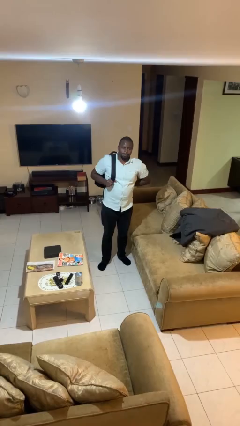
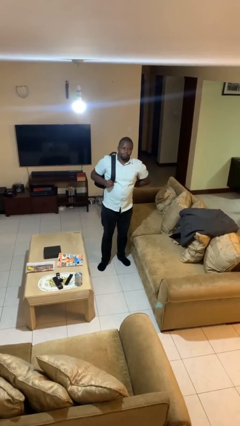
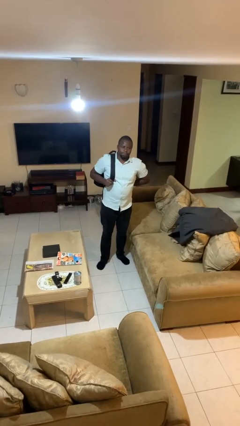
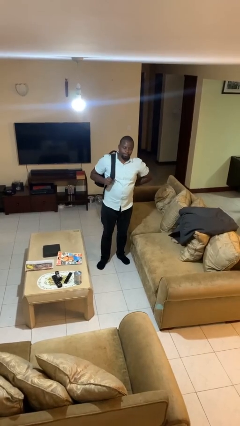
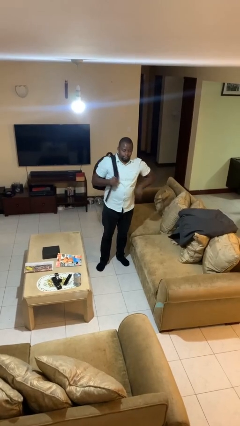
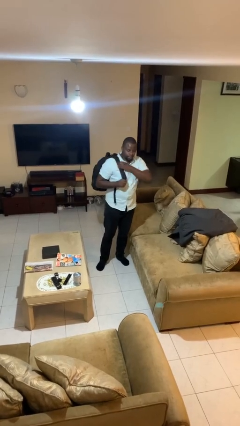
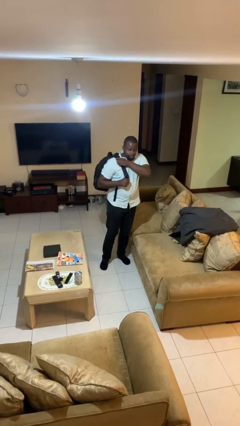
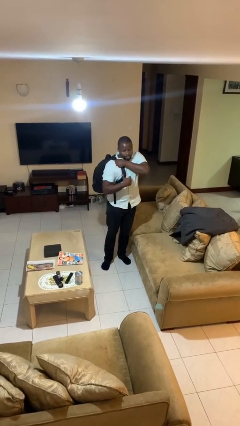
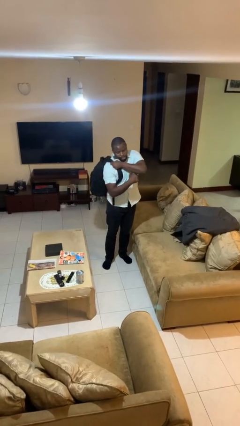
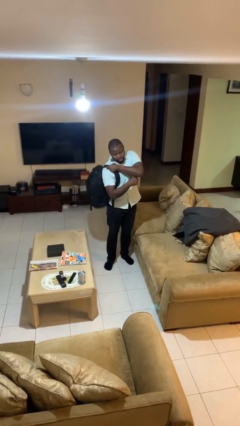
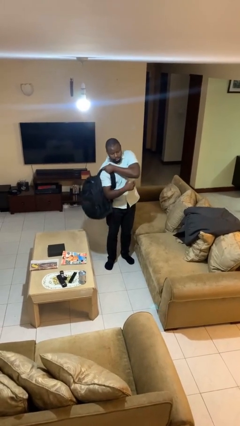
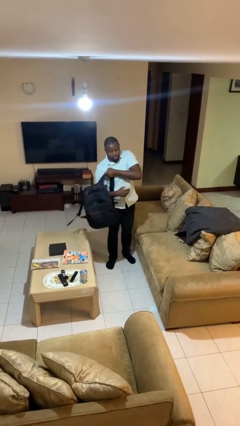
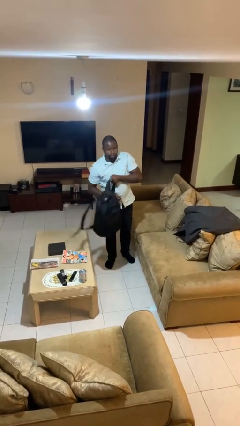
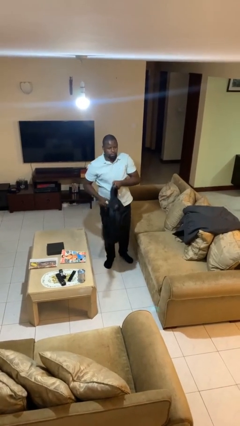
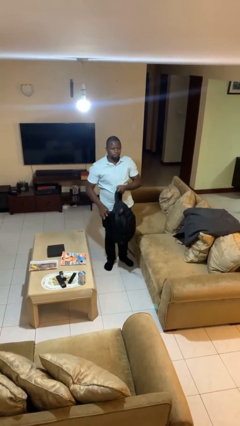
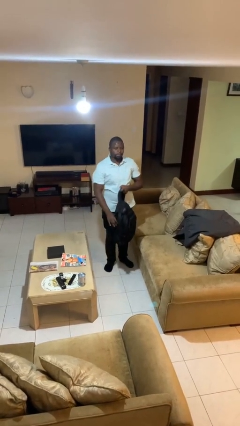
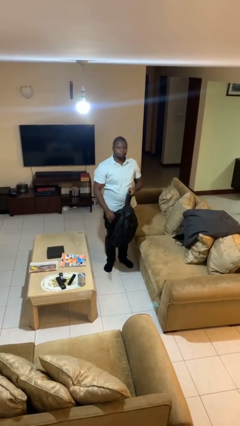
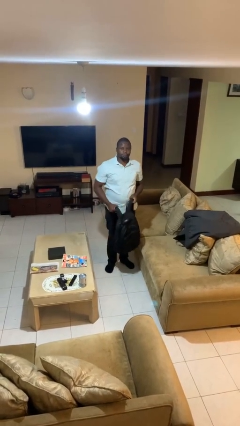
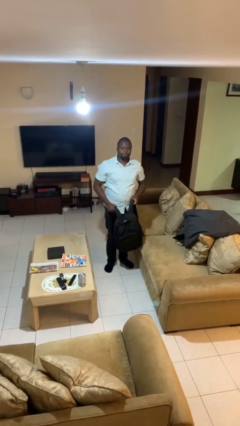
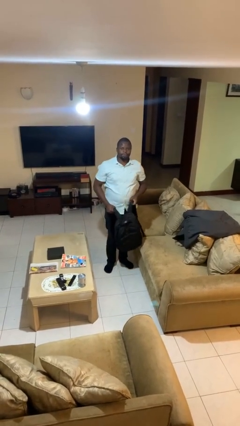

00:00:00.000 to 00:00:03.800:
person takes off backpack

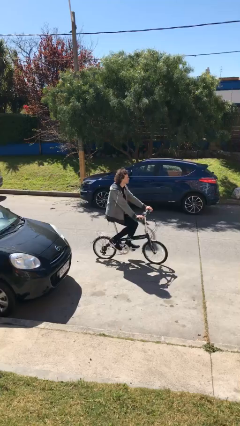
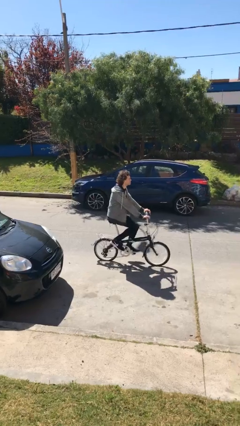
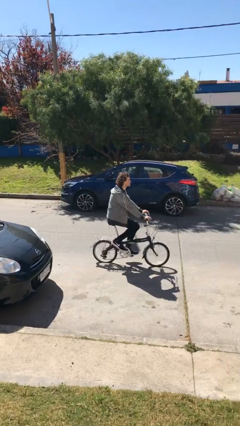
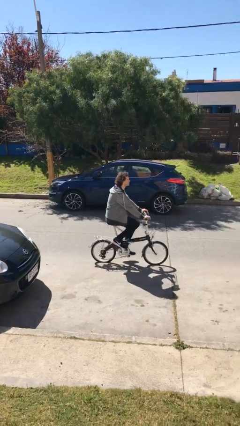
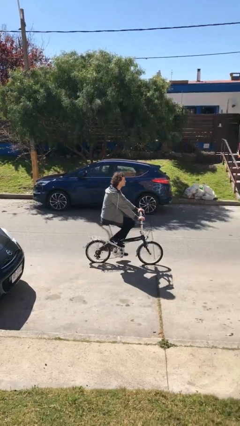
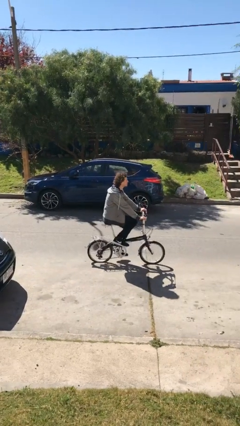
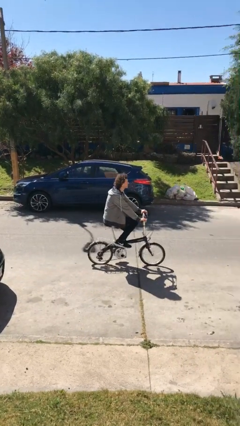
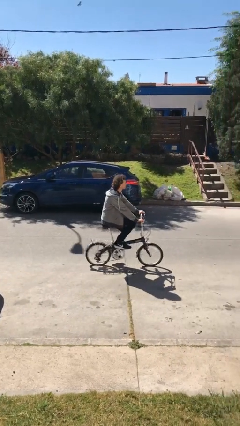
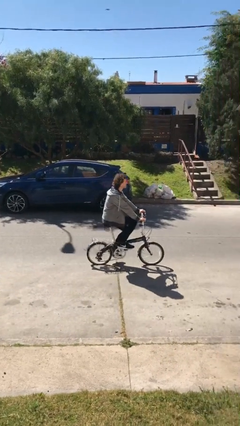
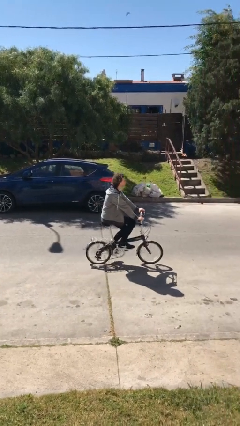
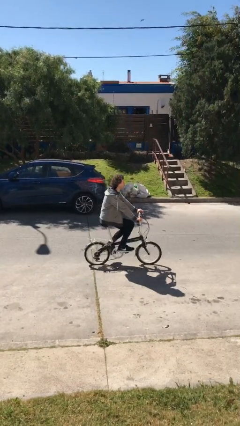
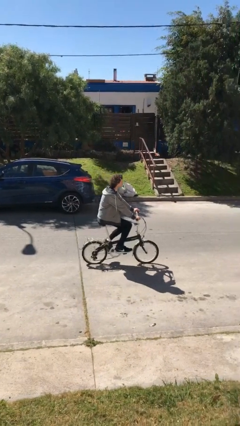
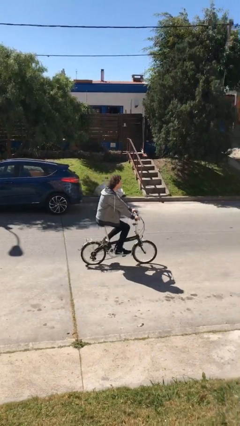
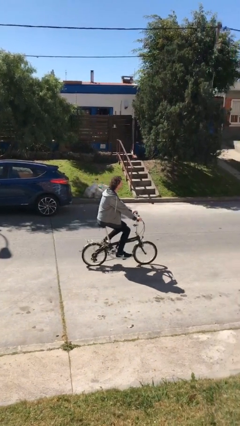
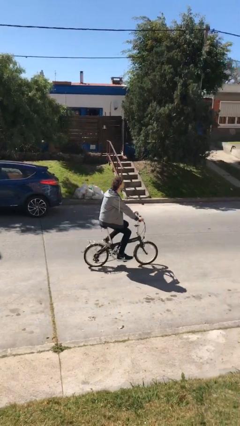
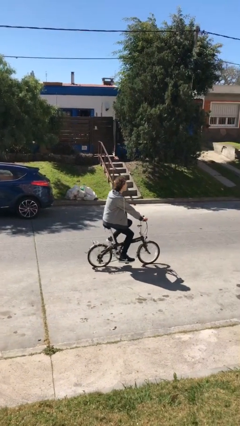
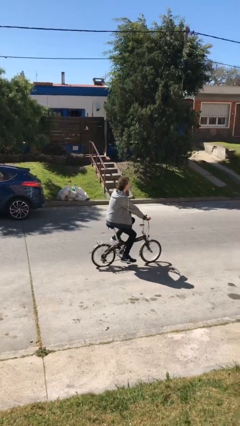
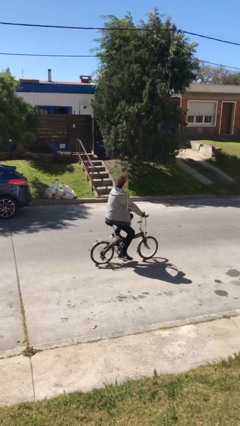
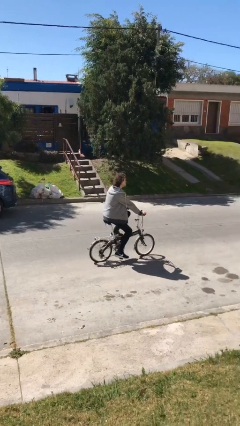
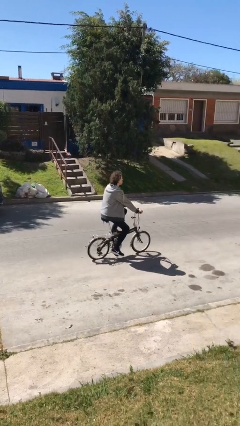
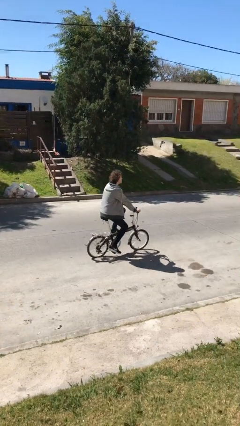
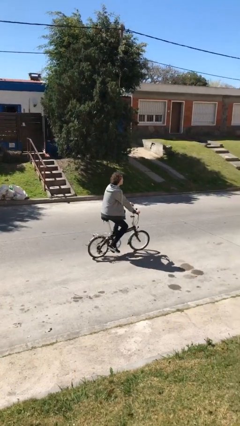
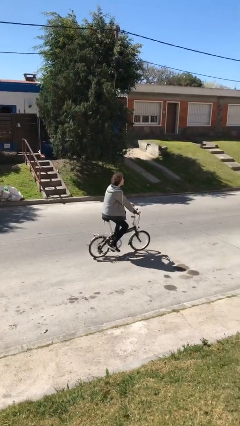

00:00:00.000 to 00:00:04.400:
person rides bicycle

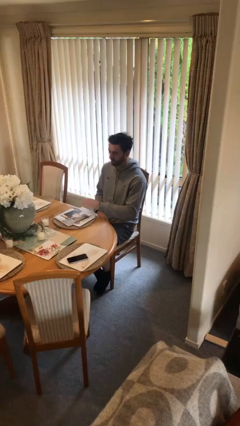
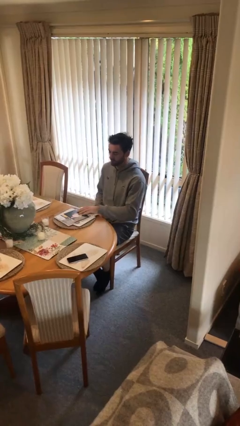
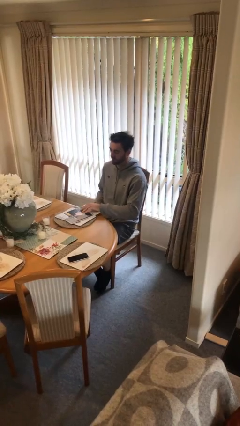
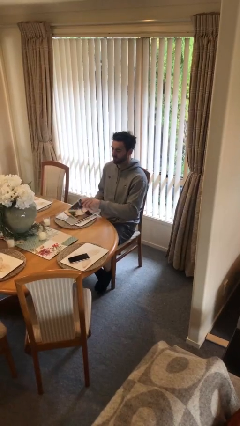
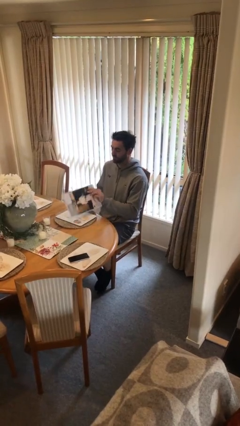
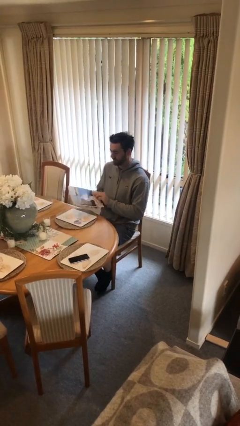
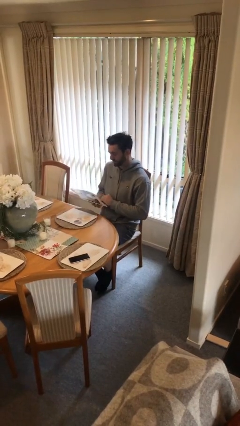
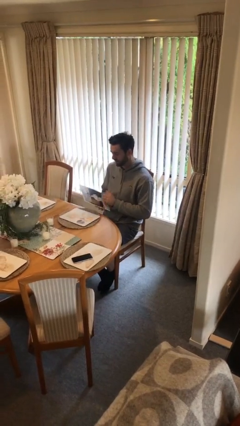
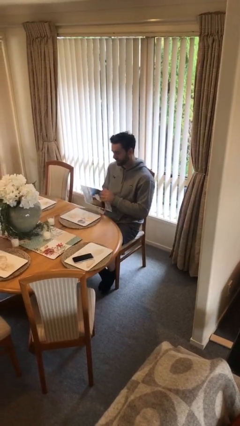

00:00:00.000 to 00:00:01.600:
person picks up object from table

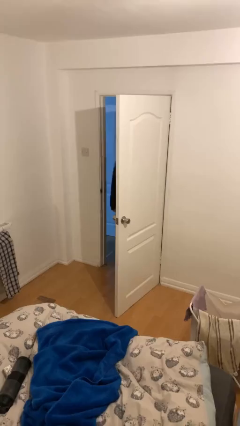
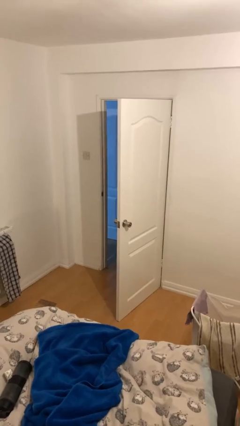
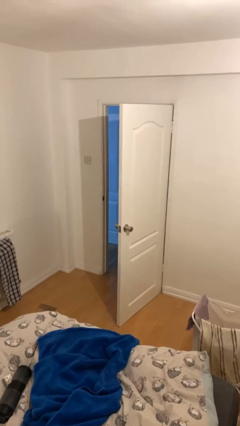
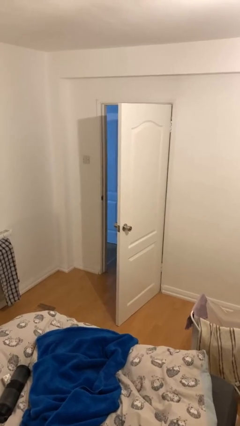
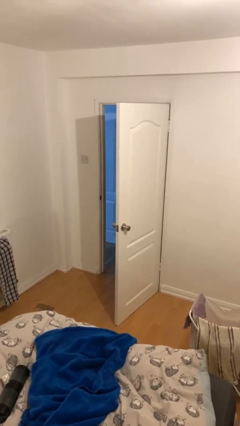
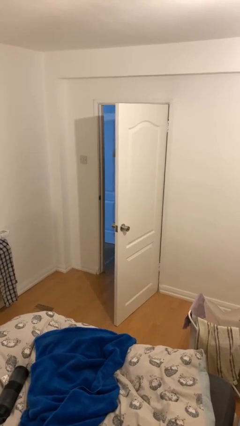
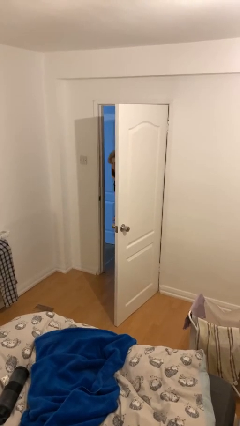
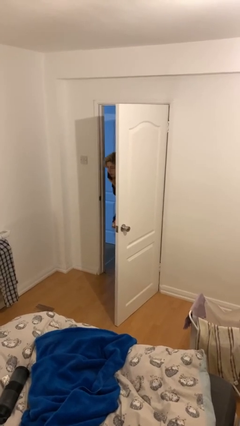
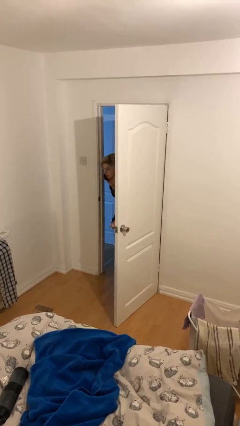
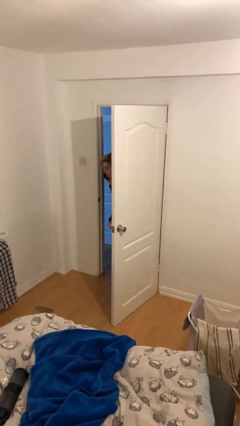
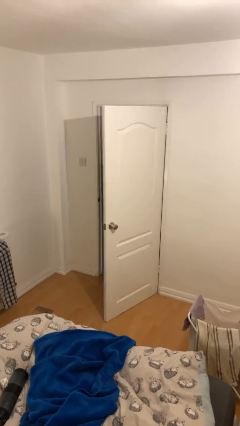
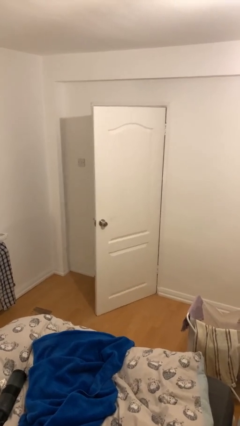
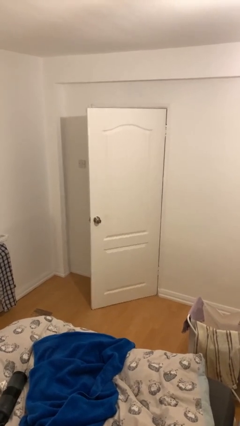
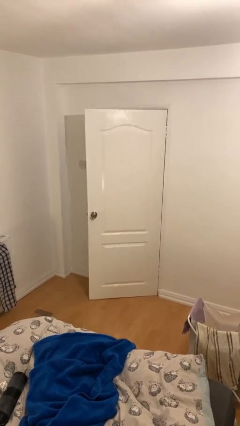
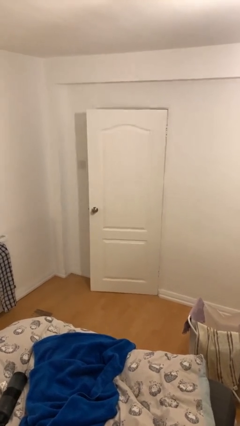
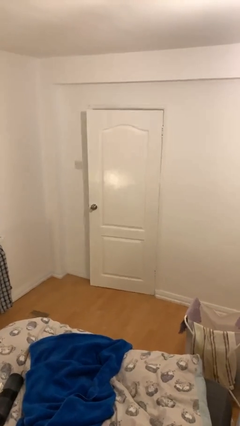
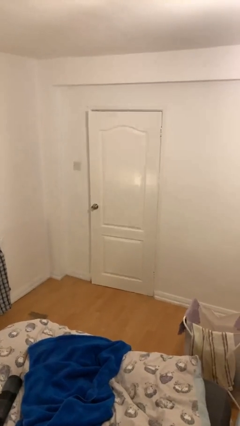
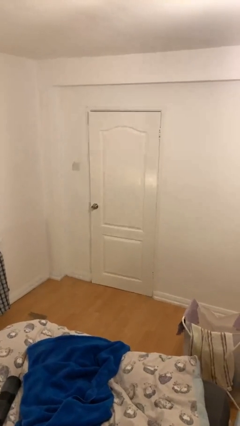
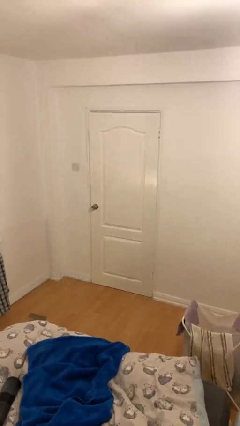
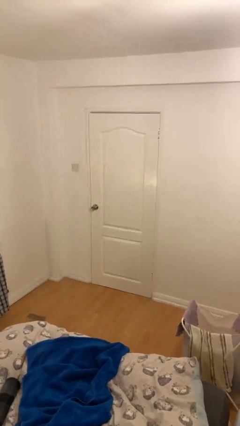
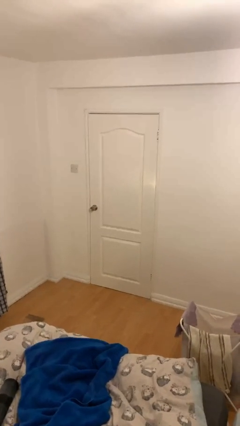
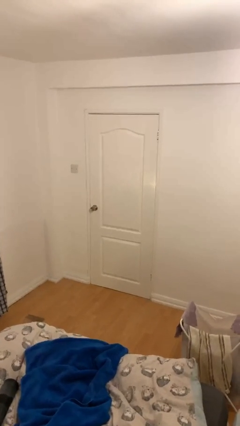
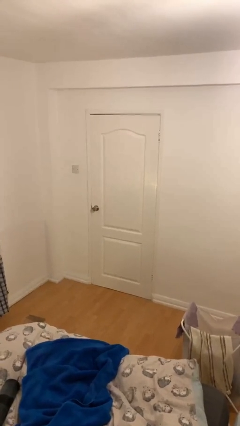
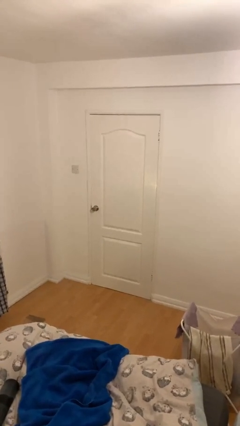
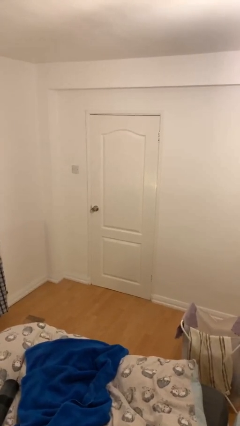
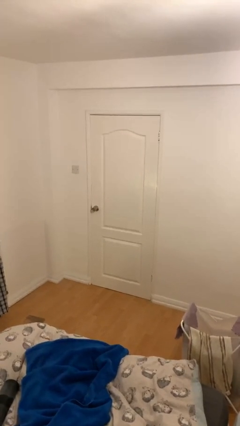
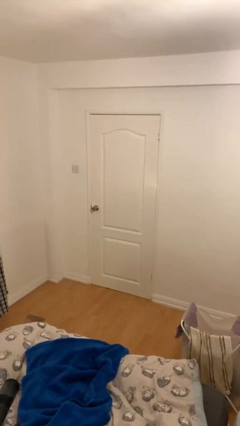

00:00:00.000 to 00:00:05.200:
person closes facility door

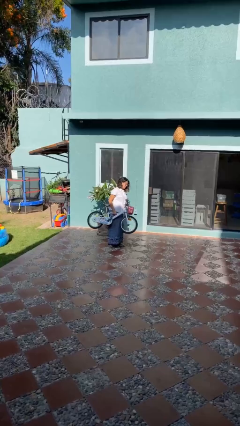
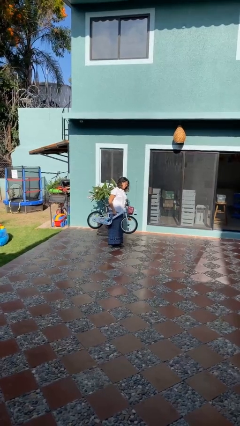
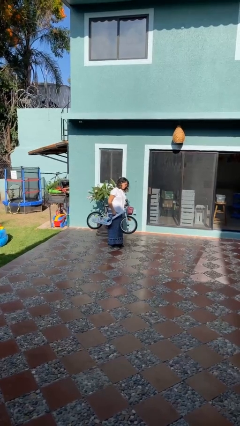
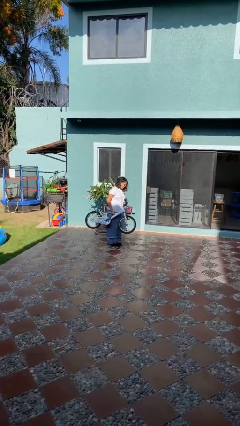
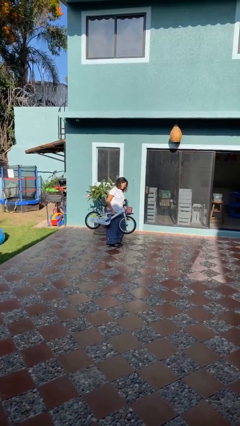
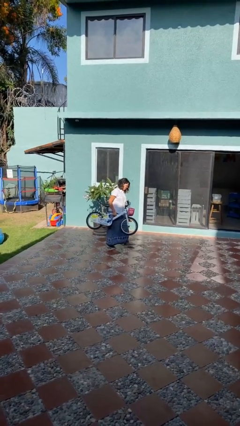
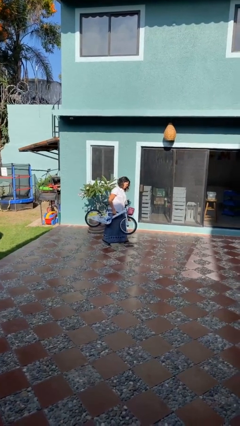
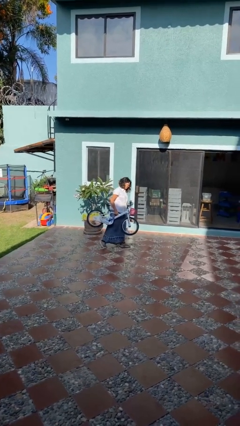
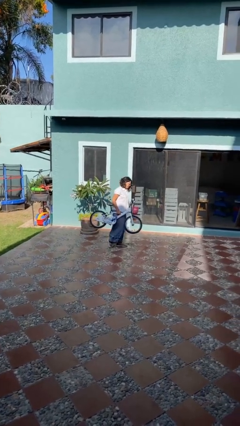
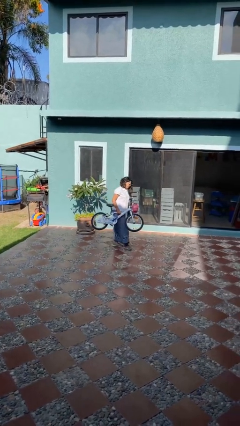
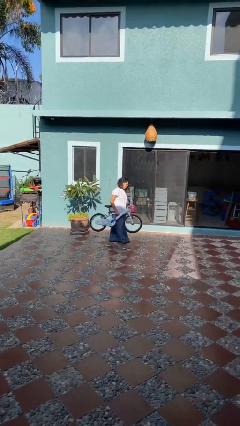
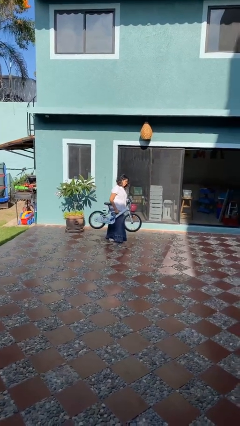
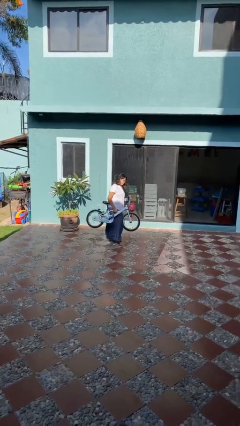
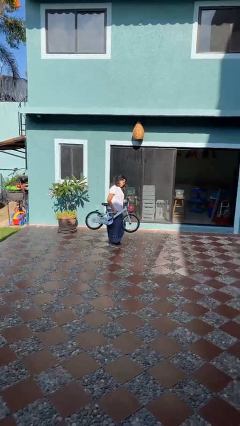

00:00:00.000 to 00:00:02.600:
person carries bicycle

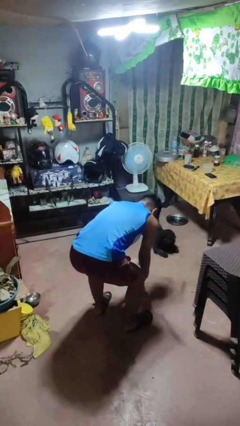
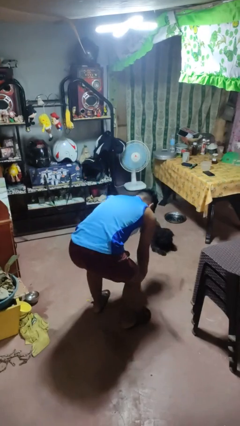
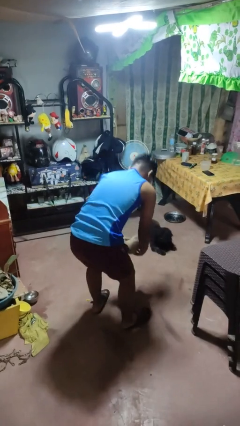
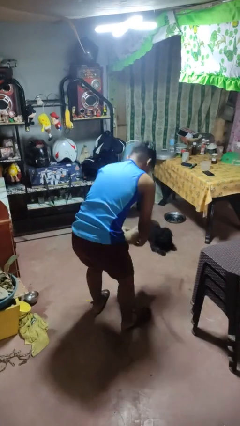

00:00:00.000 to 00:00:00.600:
person catches dropped object
